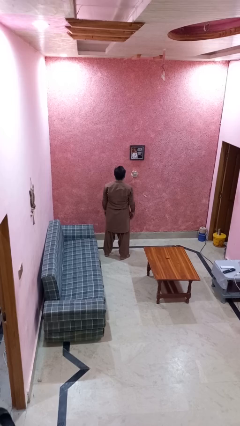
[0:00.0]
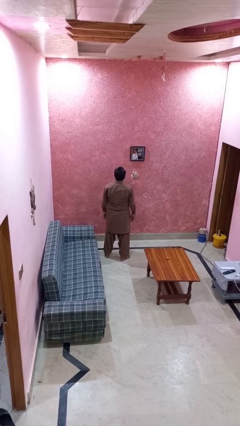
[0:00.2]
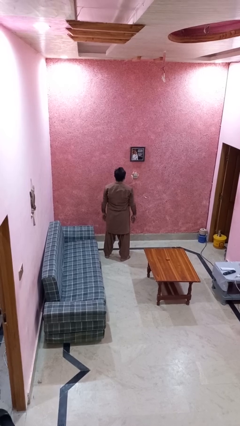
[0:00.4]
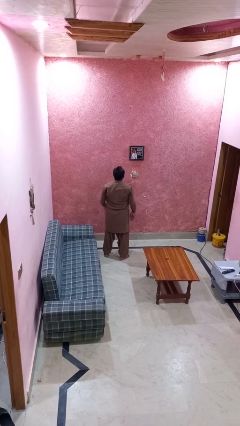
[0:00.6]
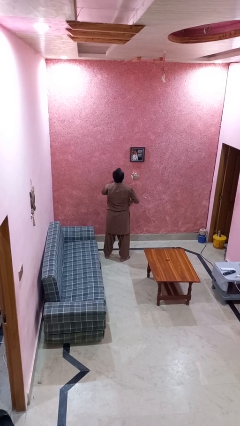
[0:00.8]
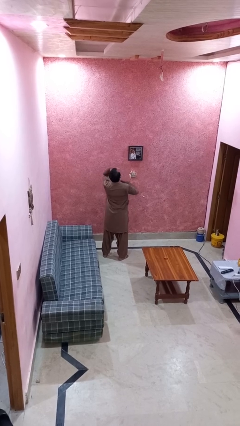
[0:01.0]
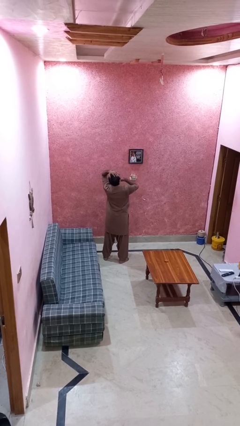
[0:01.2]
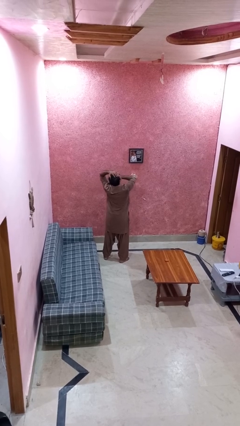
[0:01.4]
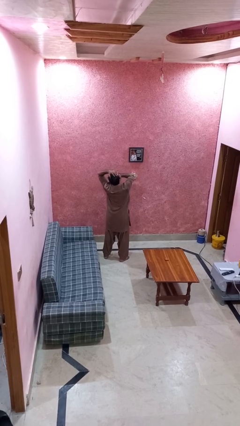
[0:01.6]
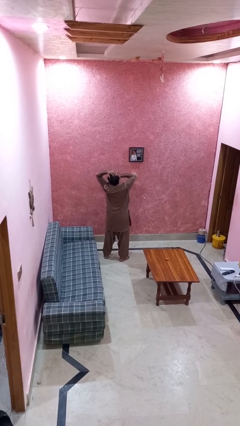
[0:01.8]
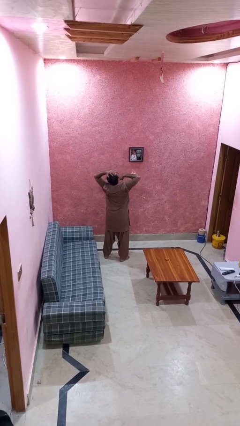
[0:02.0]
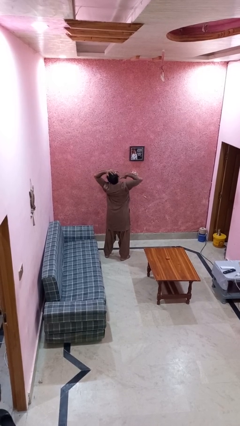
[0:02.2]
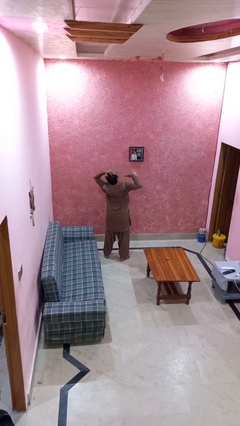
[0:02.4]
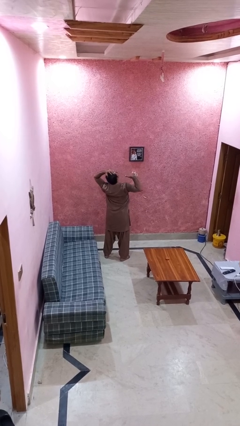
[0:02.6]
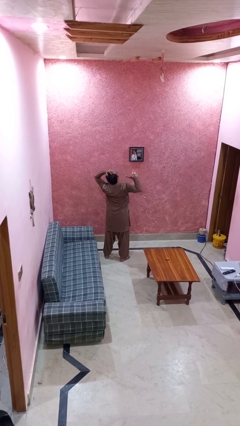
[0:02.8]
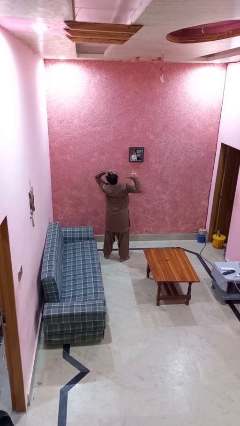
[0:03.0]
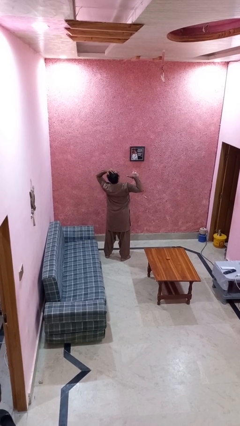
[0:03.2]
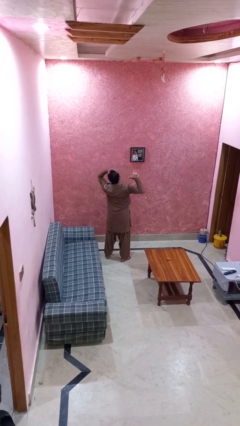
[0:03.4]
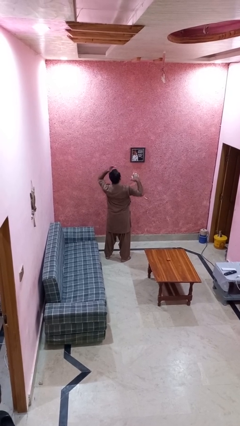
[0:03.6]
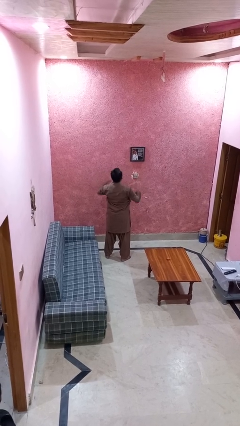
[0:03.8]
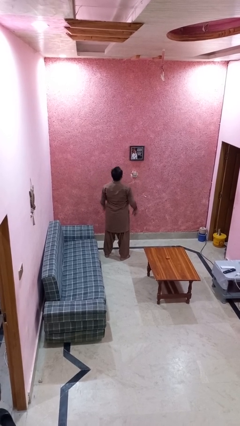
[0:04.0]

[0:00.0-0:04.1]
person gestures cut

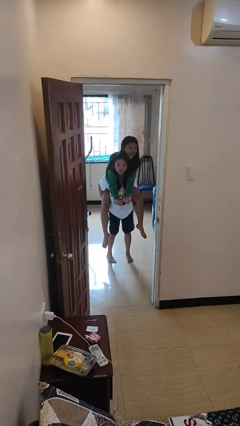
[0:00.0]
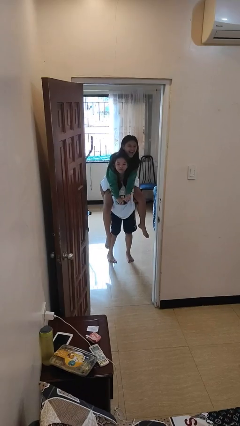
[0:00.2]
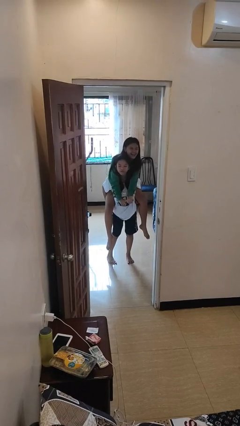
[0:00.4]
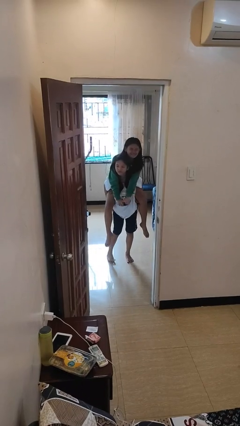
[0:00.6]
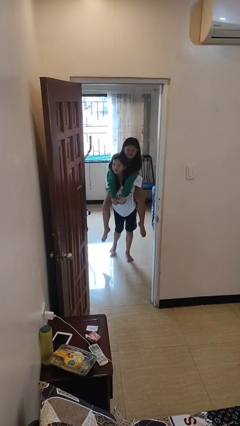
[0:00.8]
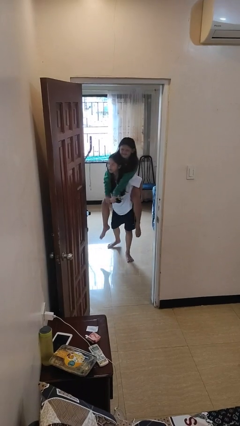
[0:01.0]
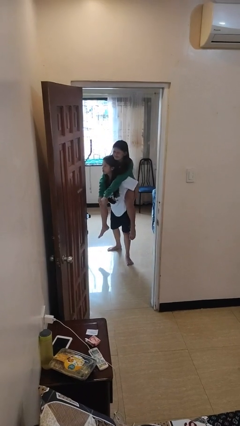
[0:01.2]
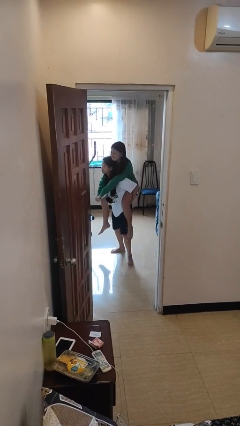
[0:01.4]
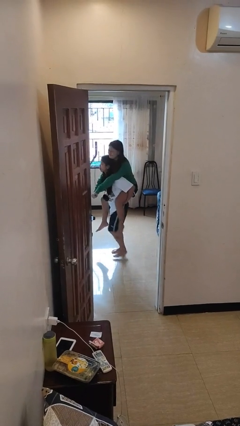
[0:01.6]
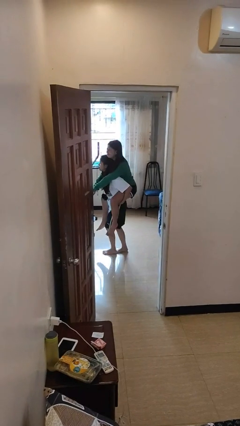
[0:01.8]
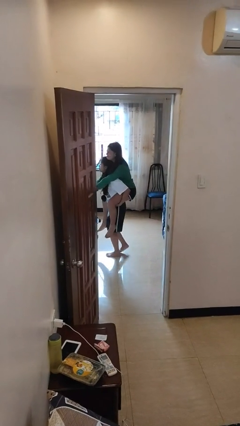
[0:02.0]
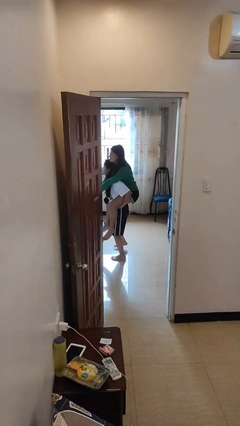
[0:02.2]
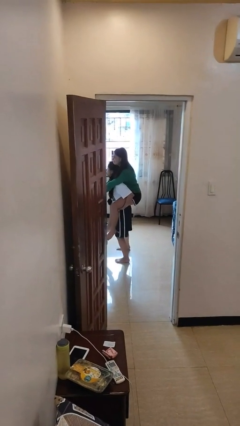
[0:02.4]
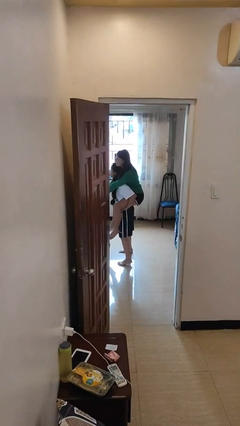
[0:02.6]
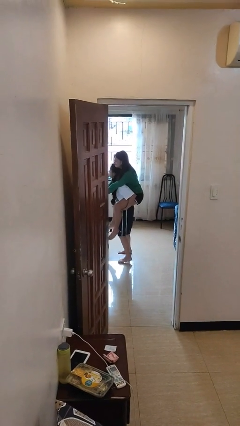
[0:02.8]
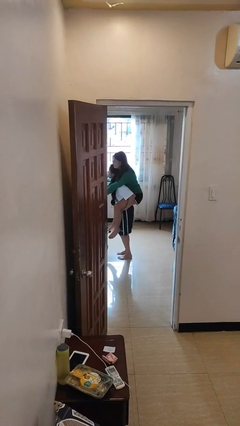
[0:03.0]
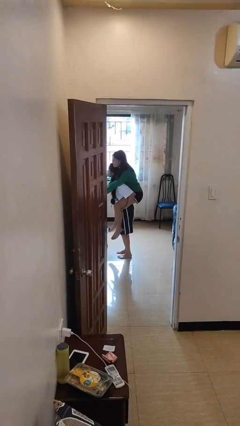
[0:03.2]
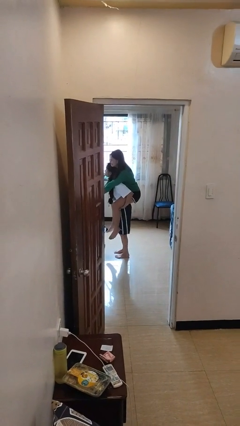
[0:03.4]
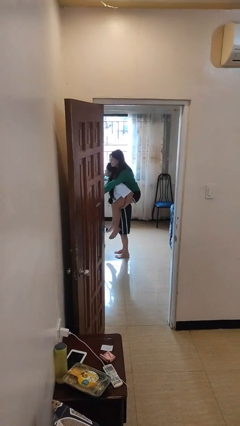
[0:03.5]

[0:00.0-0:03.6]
person carries person on back

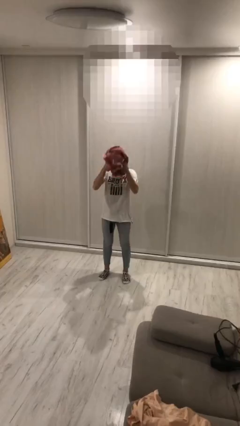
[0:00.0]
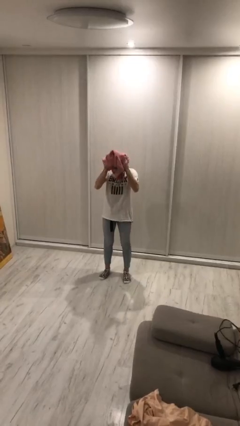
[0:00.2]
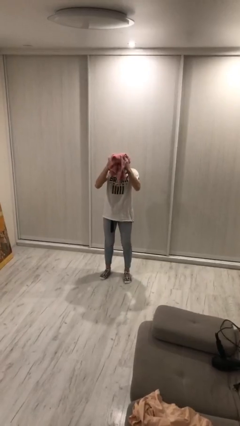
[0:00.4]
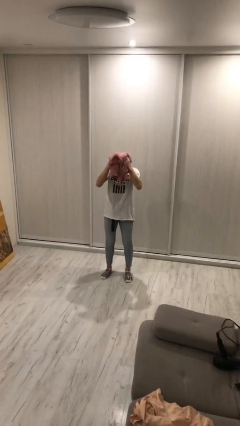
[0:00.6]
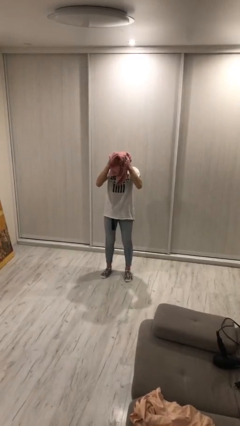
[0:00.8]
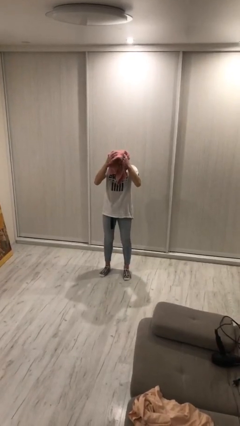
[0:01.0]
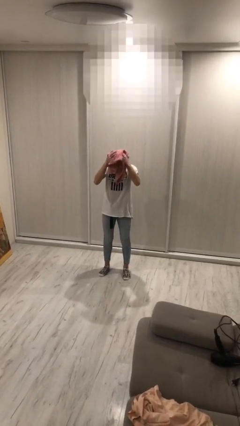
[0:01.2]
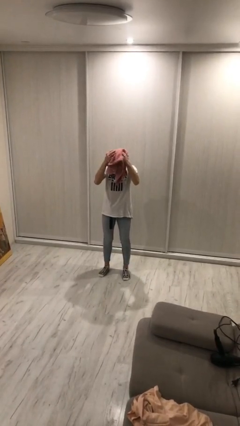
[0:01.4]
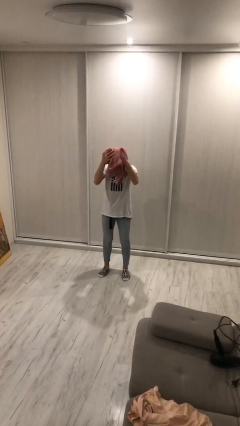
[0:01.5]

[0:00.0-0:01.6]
person dries hair with towel

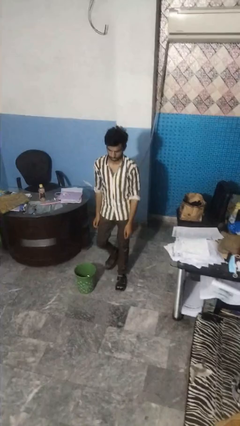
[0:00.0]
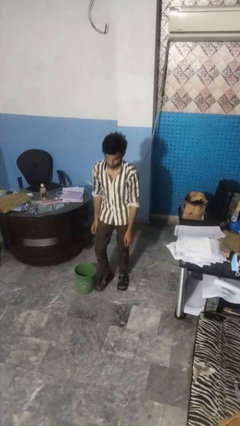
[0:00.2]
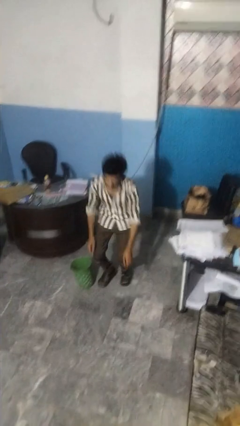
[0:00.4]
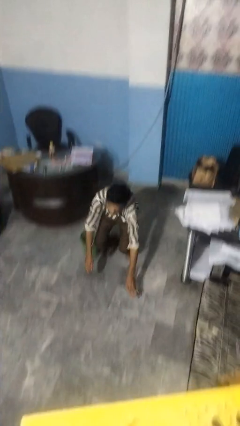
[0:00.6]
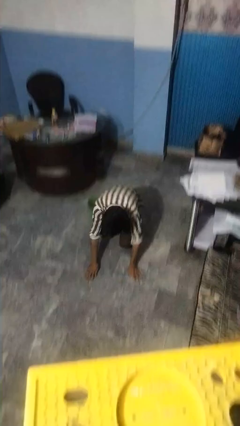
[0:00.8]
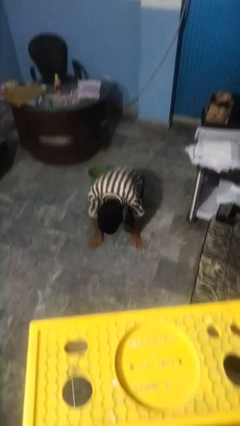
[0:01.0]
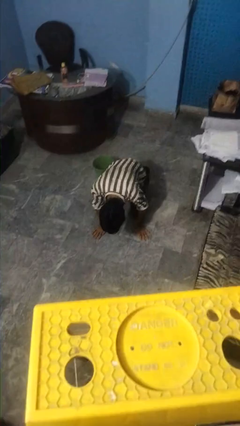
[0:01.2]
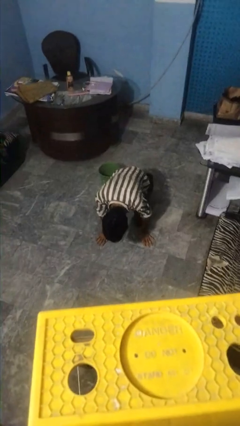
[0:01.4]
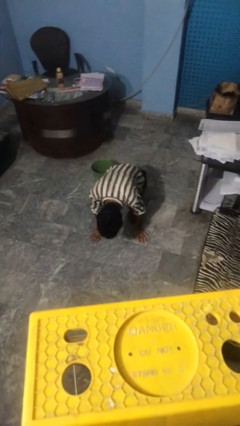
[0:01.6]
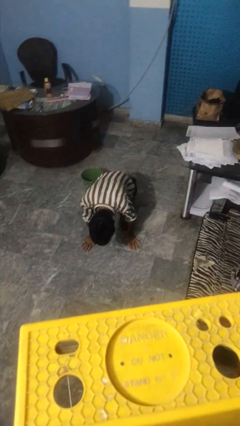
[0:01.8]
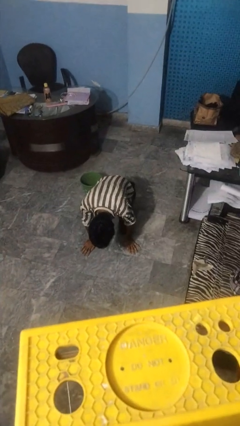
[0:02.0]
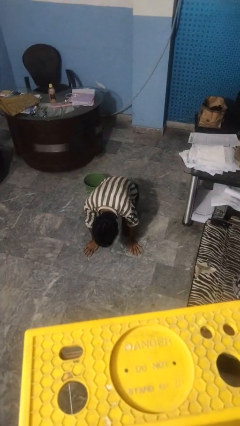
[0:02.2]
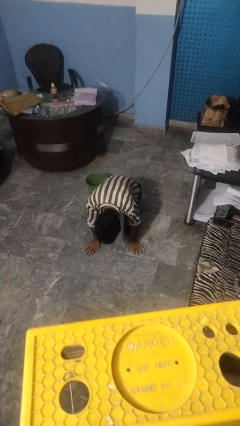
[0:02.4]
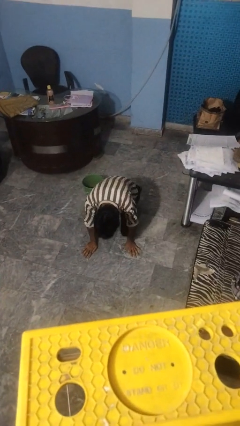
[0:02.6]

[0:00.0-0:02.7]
person trips on object on floor

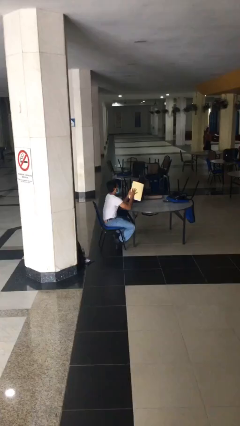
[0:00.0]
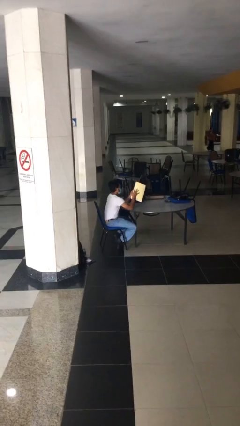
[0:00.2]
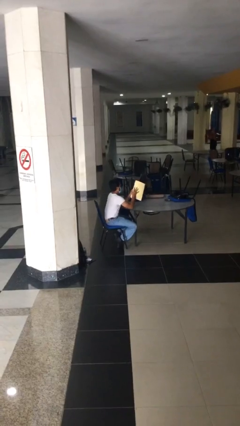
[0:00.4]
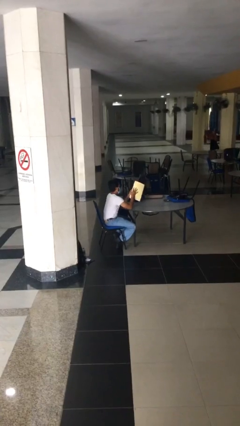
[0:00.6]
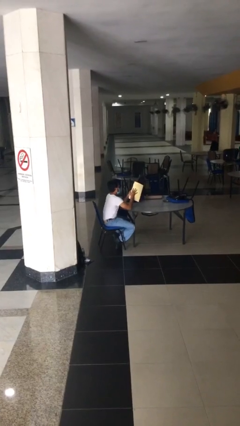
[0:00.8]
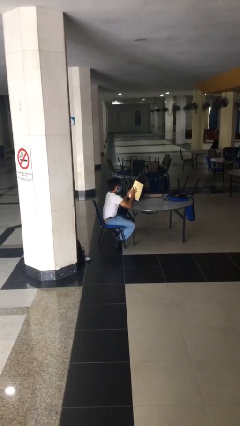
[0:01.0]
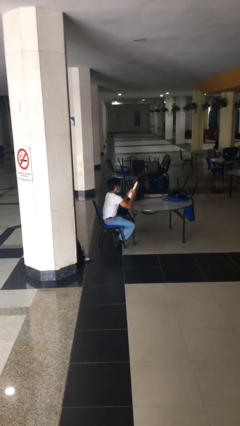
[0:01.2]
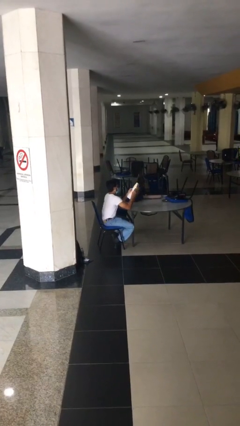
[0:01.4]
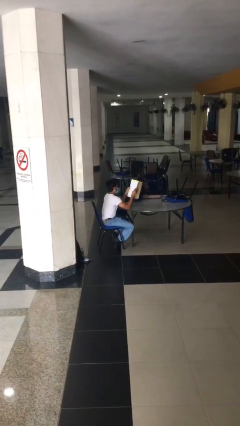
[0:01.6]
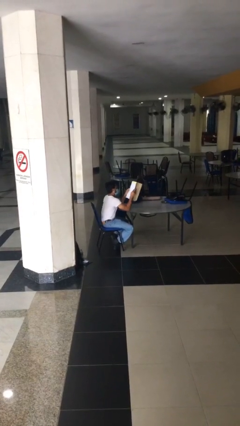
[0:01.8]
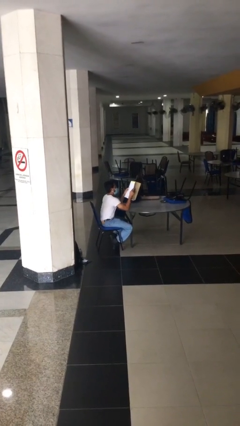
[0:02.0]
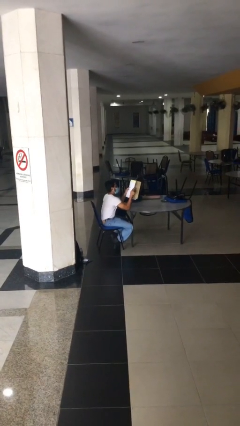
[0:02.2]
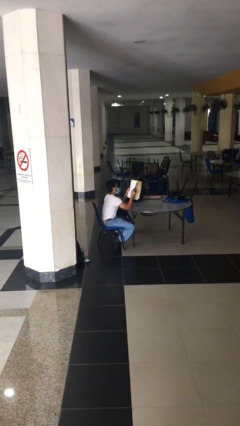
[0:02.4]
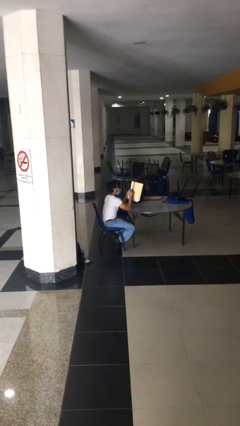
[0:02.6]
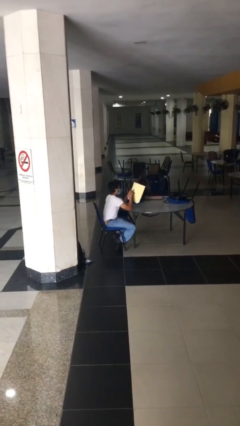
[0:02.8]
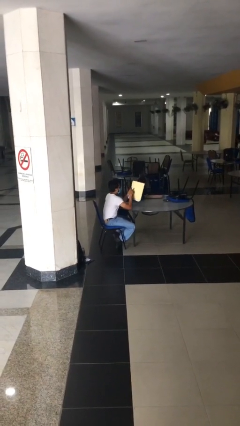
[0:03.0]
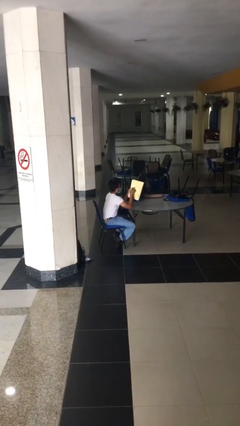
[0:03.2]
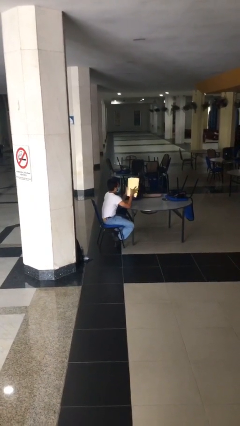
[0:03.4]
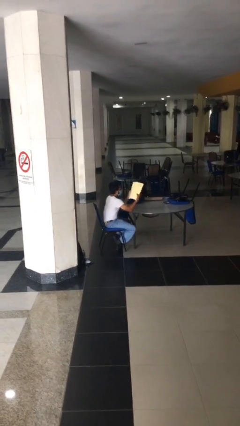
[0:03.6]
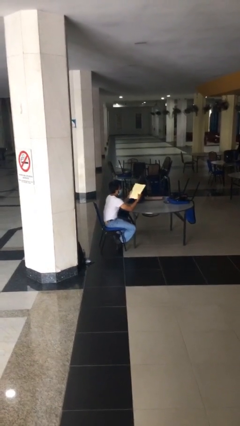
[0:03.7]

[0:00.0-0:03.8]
person reads document

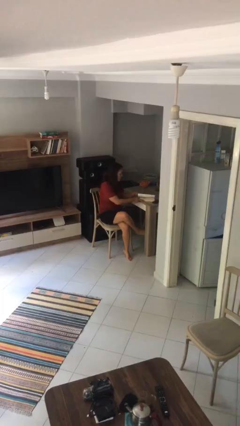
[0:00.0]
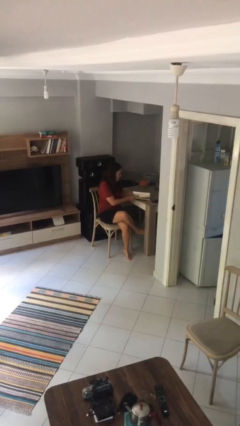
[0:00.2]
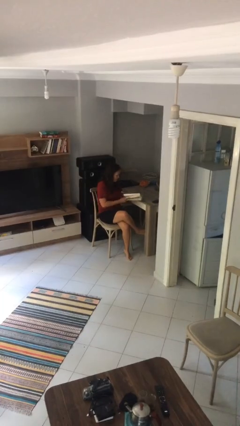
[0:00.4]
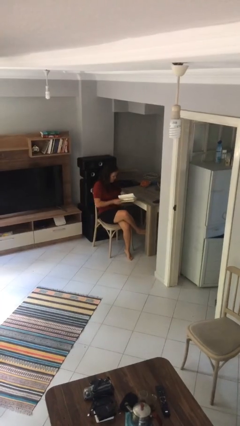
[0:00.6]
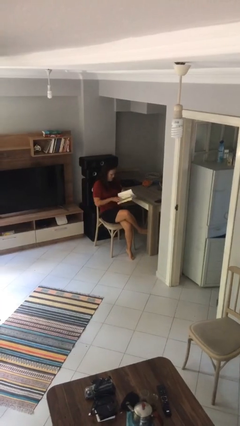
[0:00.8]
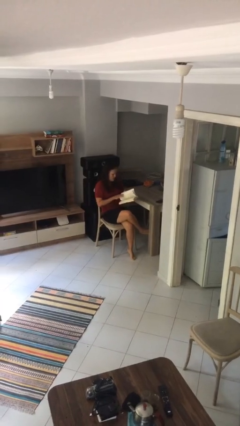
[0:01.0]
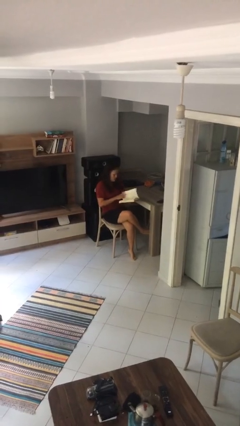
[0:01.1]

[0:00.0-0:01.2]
person picks up object from table

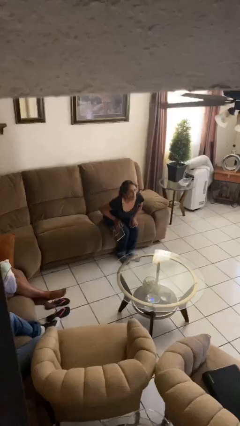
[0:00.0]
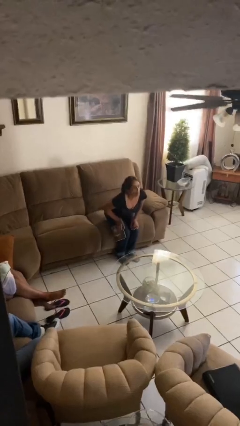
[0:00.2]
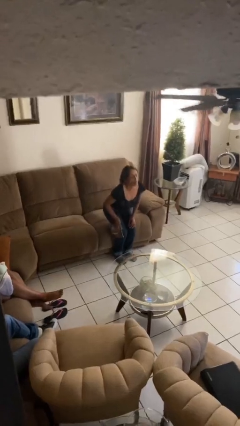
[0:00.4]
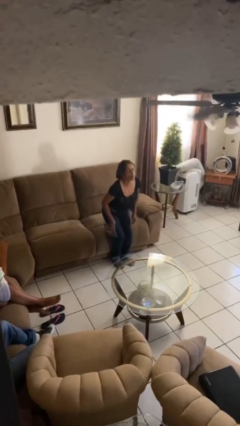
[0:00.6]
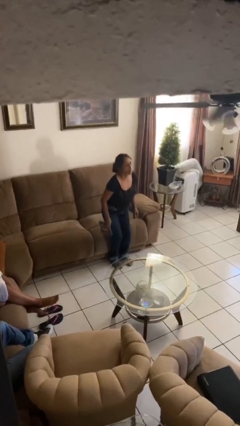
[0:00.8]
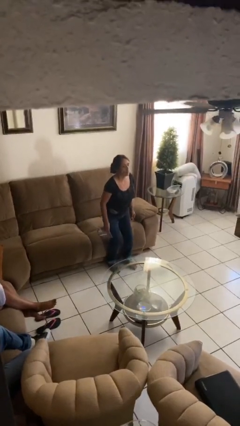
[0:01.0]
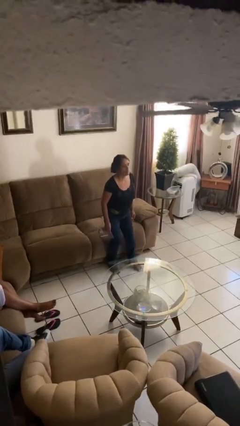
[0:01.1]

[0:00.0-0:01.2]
person stands up
